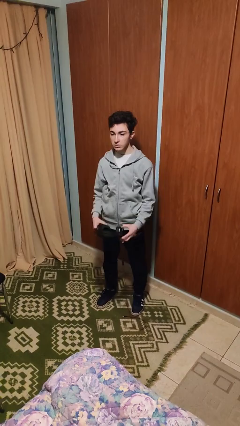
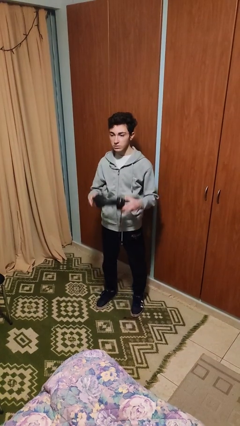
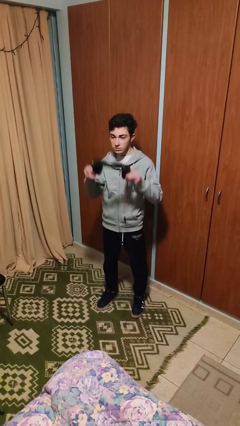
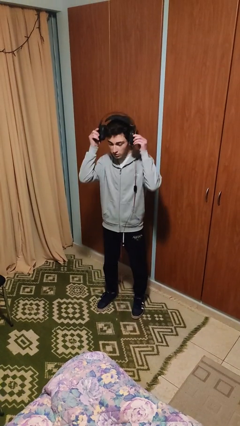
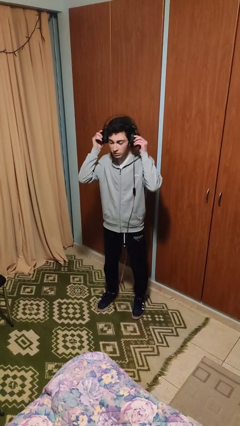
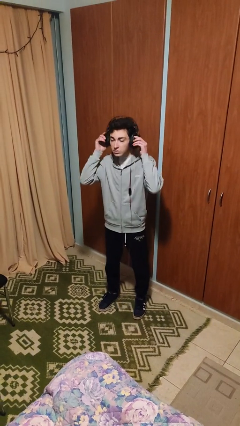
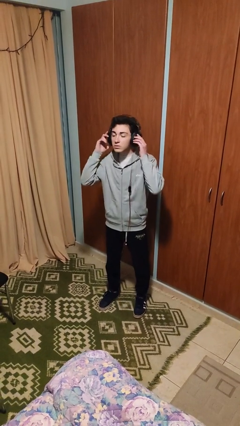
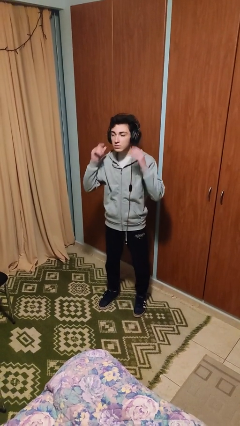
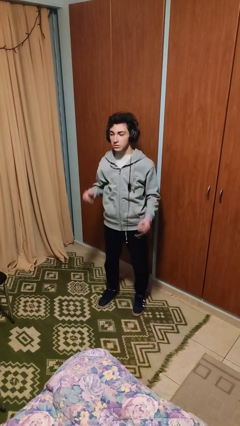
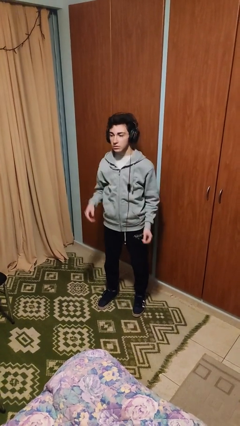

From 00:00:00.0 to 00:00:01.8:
person puts on headphones

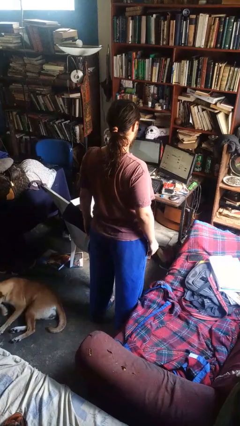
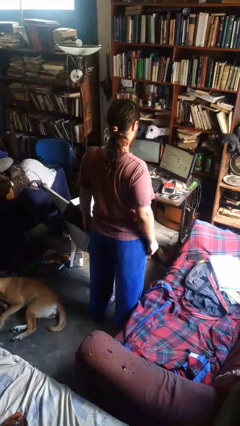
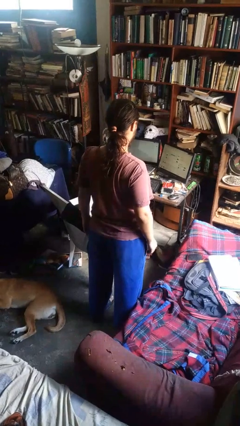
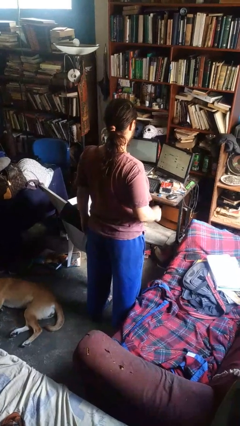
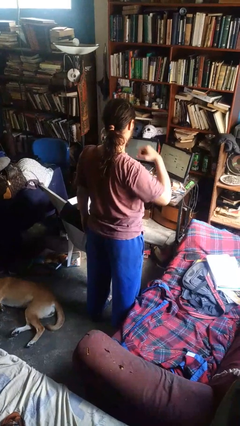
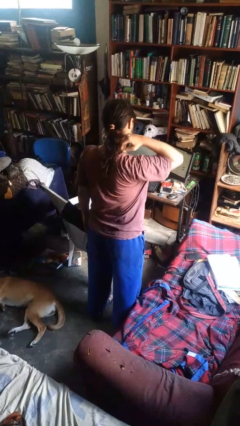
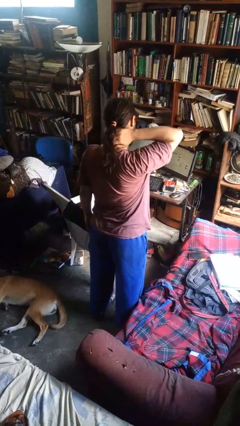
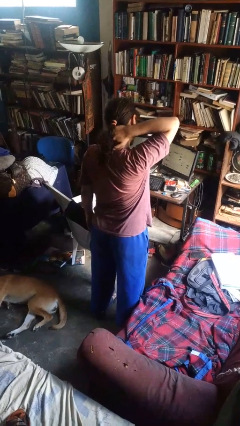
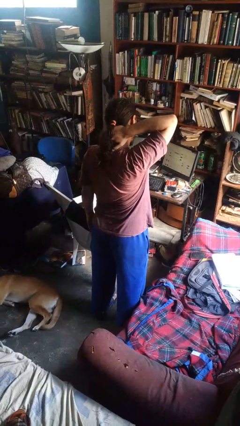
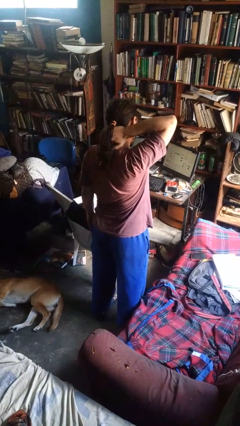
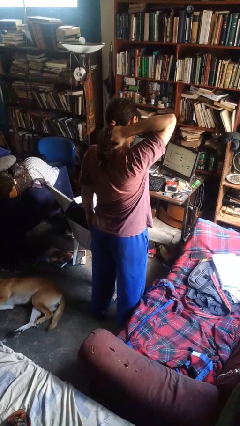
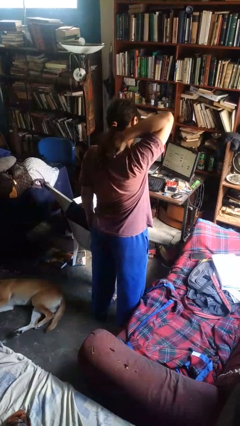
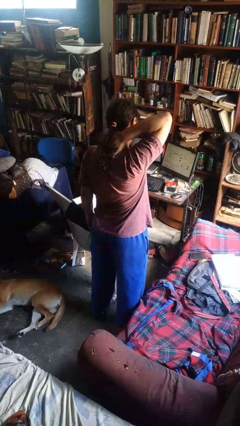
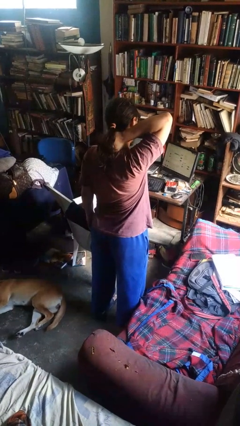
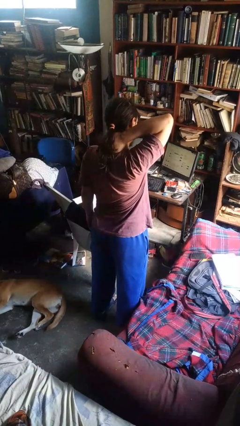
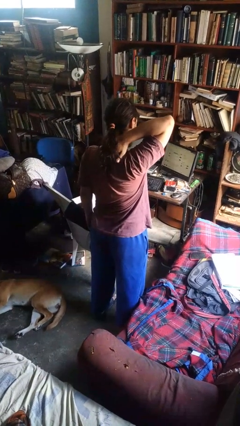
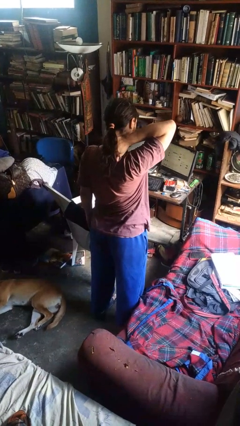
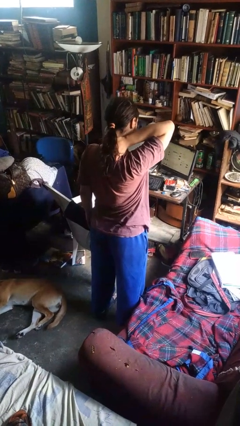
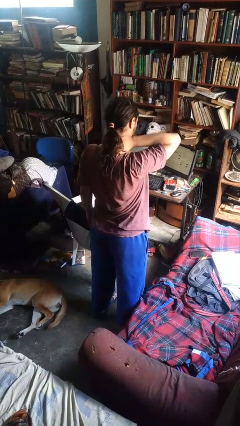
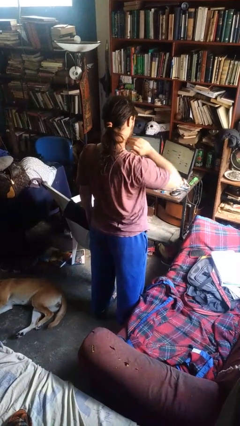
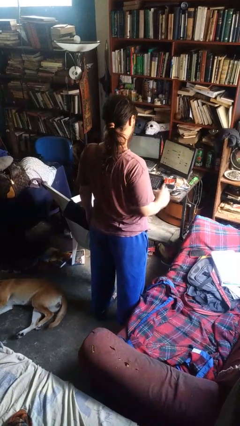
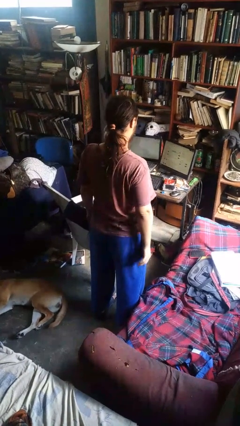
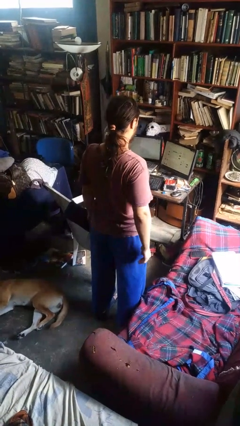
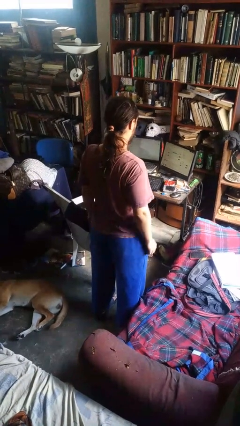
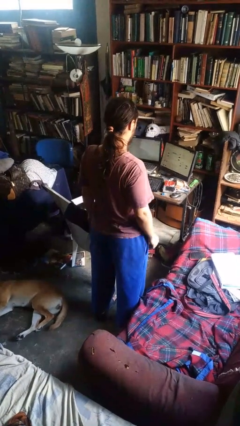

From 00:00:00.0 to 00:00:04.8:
person rubs neck

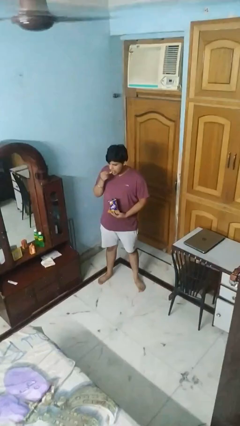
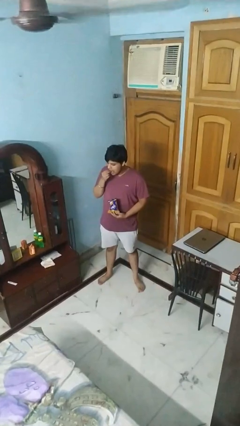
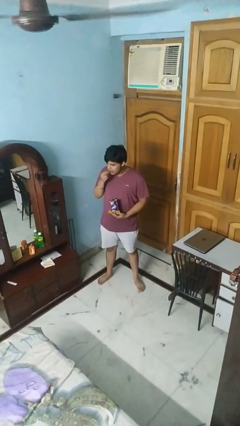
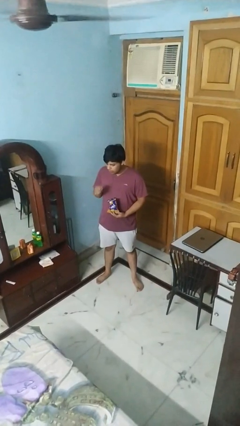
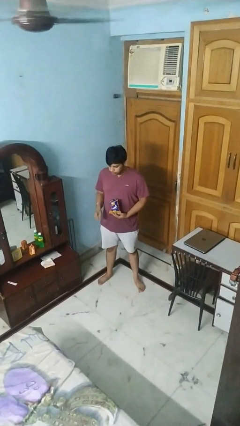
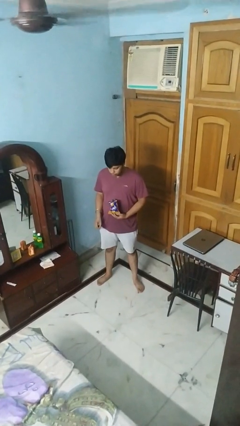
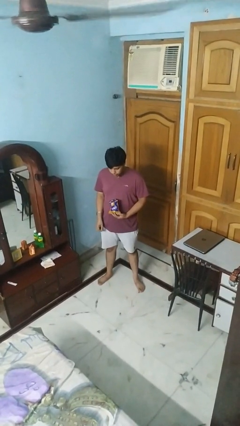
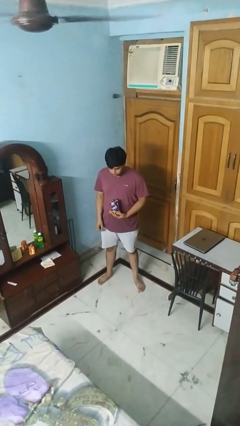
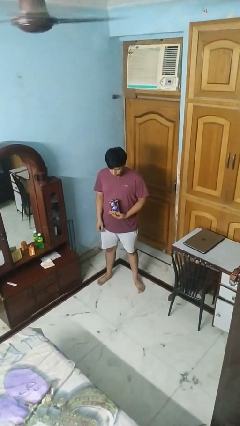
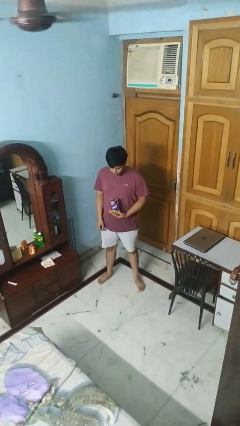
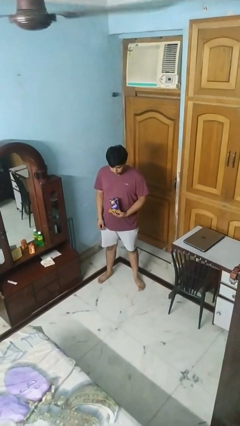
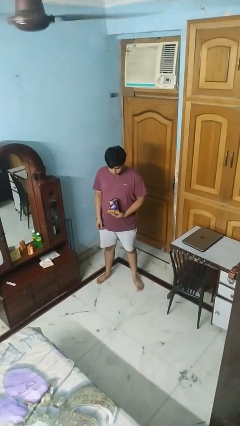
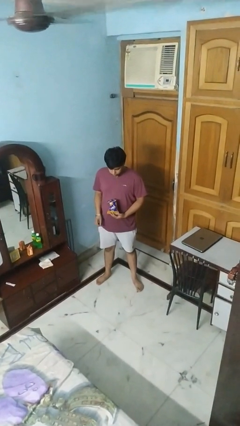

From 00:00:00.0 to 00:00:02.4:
person eats snack from bag

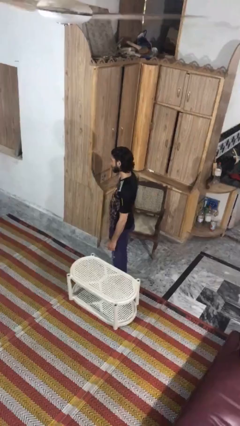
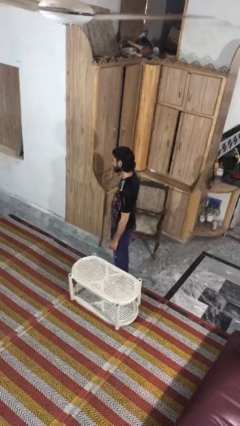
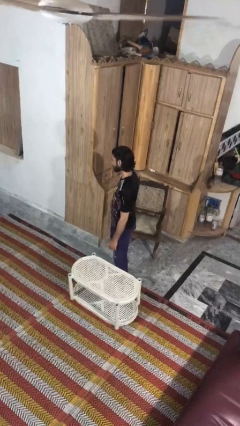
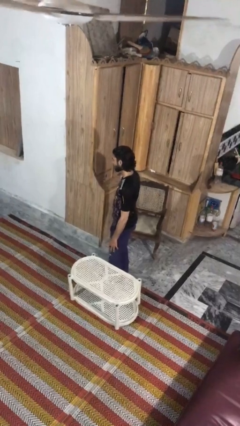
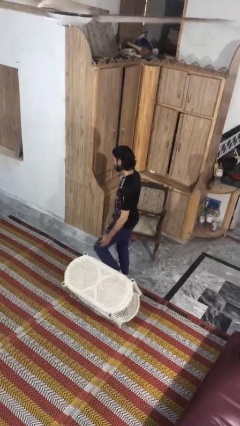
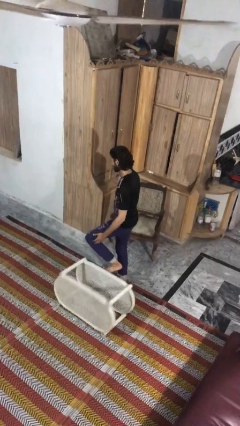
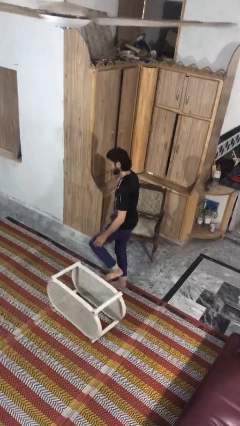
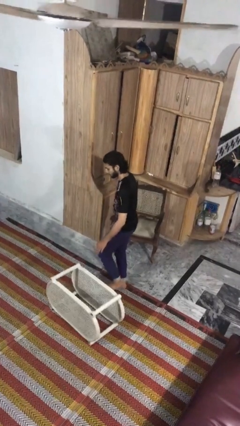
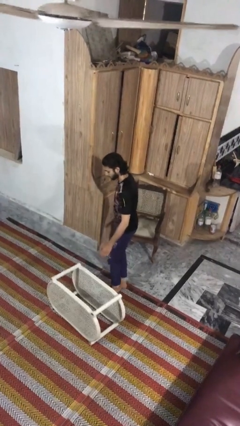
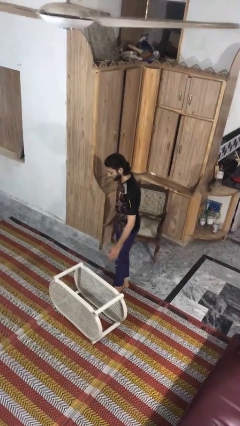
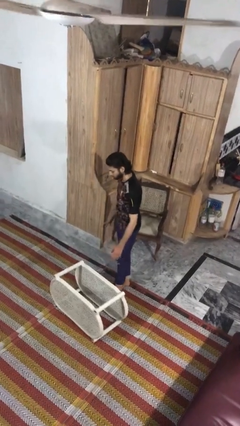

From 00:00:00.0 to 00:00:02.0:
person knocks over furniture

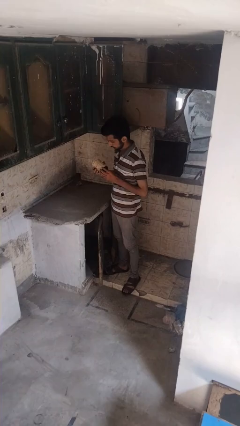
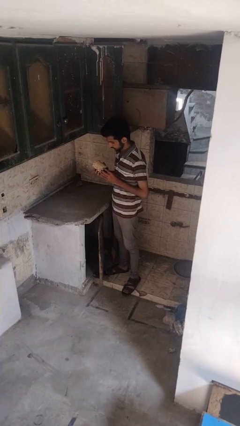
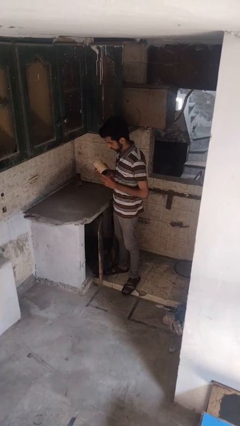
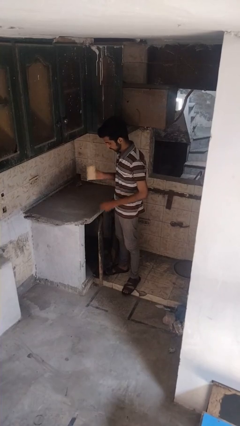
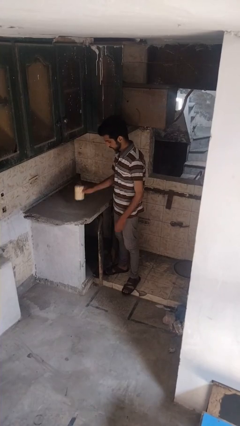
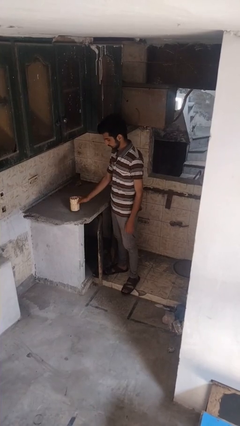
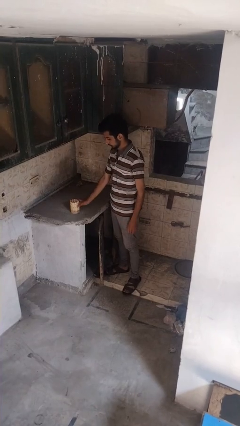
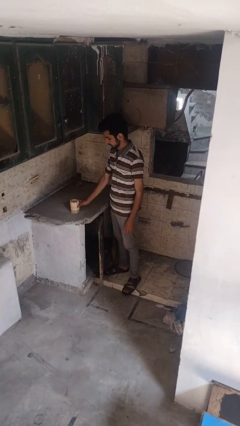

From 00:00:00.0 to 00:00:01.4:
person puts down object on countertop

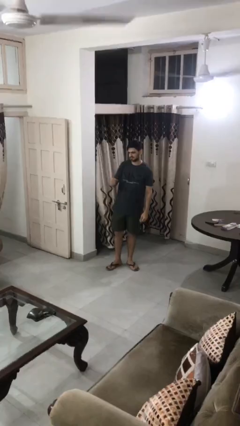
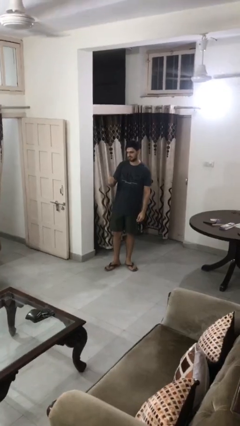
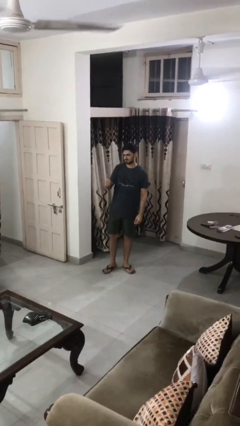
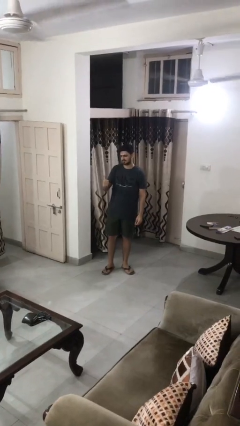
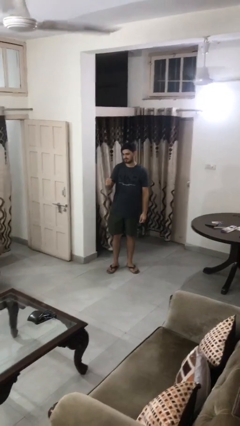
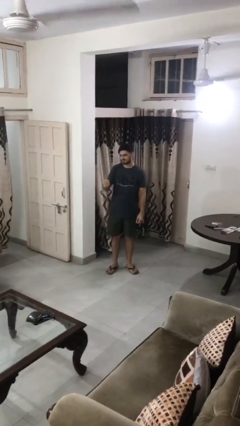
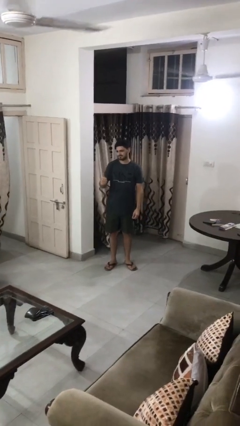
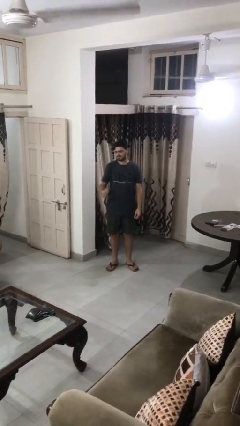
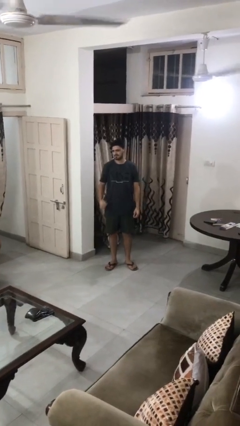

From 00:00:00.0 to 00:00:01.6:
person gestures thumbs up

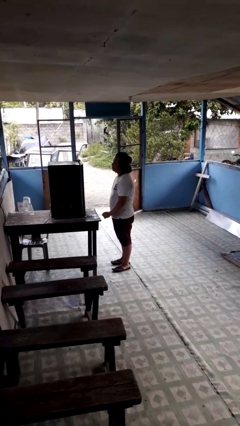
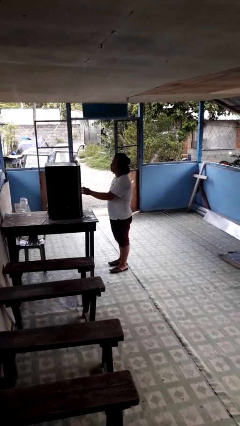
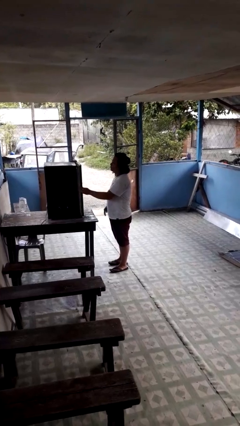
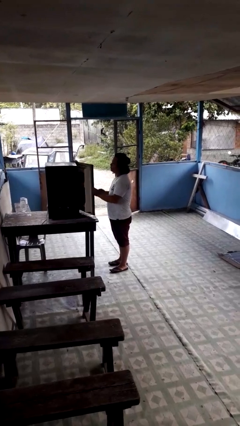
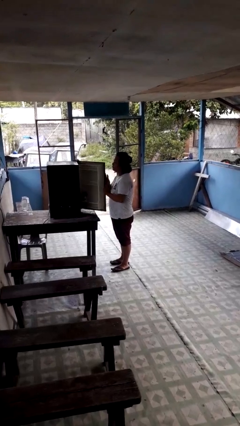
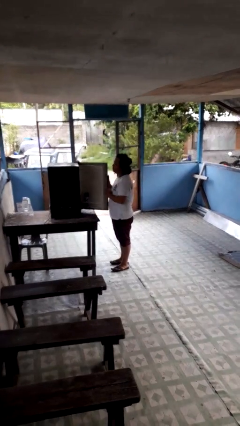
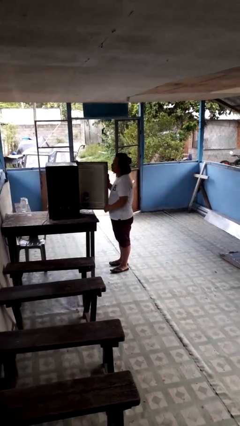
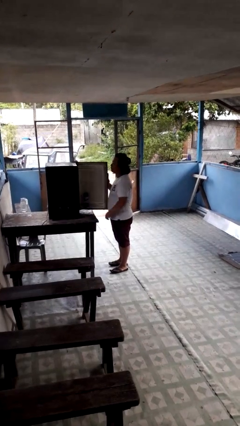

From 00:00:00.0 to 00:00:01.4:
person opens refrigerator

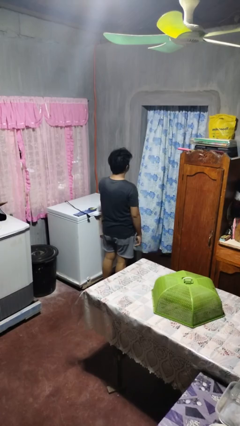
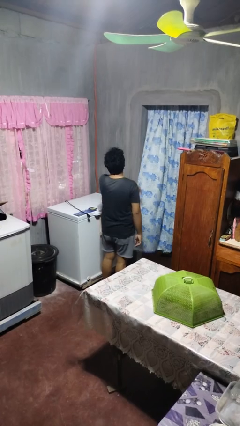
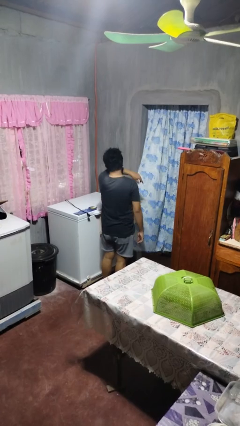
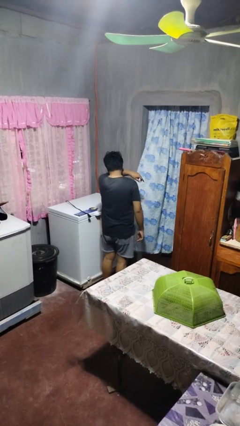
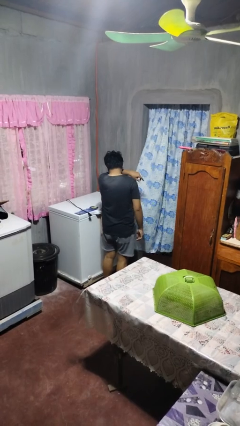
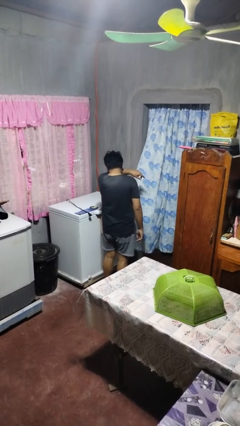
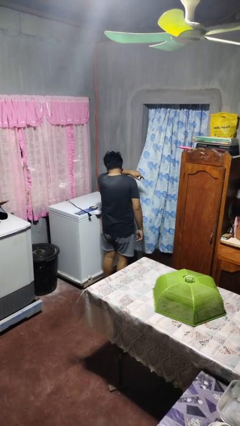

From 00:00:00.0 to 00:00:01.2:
person sneezes into arm
